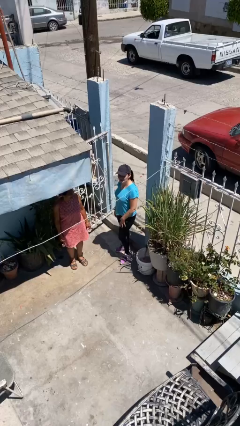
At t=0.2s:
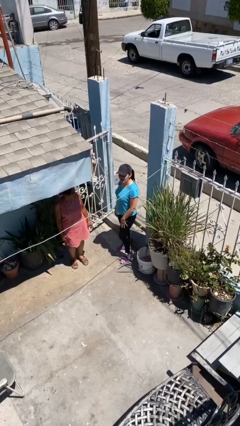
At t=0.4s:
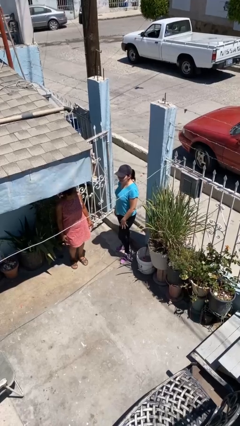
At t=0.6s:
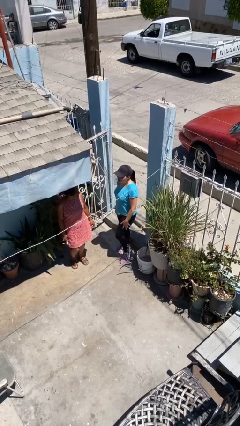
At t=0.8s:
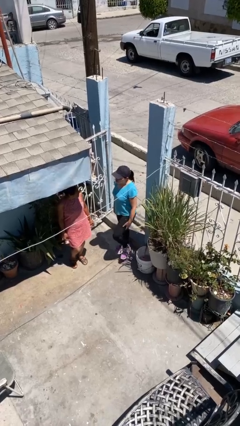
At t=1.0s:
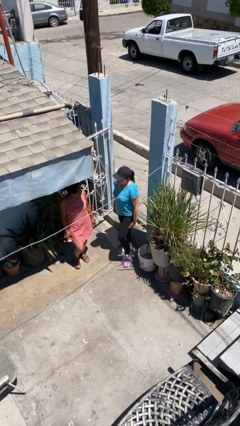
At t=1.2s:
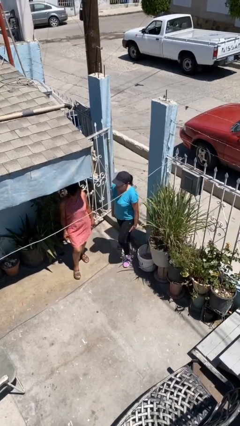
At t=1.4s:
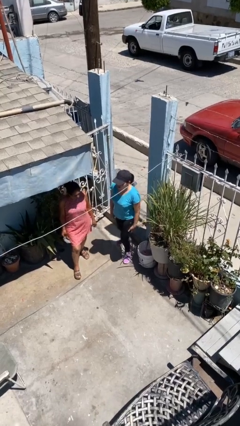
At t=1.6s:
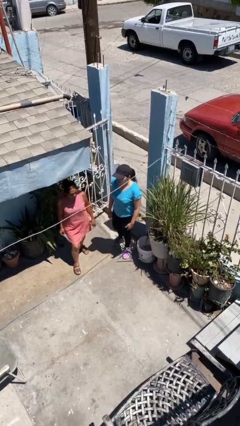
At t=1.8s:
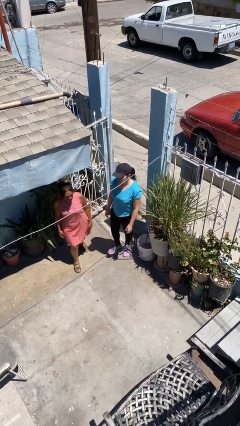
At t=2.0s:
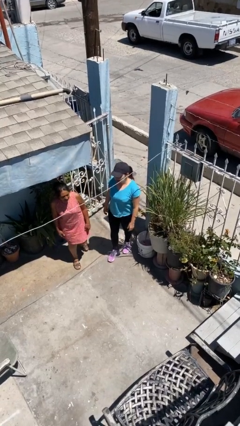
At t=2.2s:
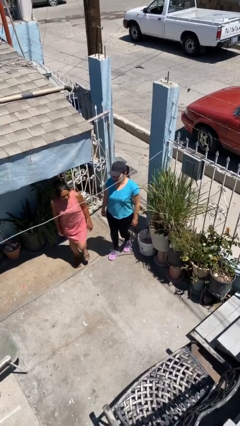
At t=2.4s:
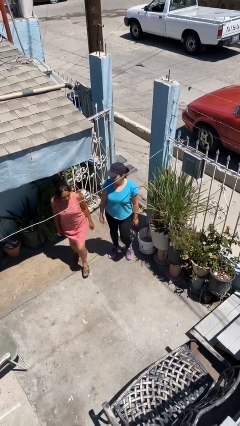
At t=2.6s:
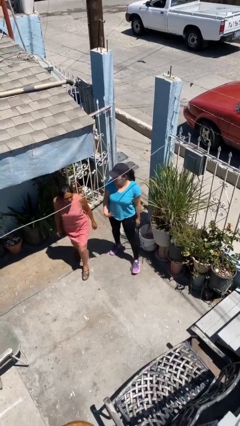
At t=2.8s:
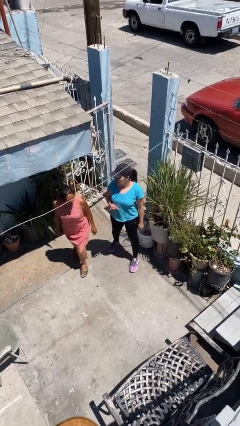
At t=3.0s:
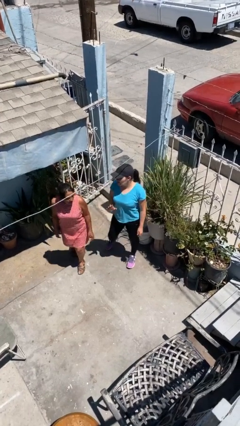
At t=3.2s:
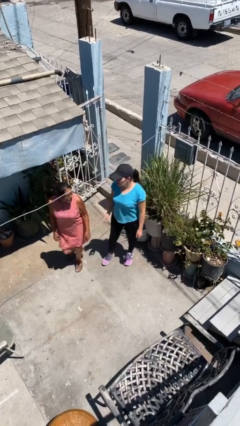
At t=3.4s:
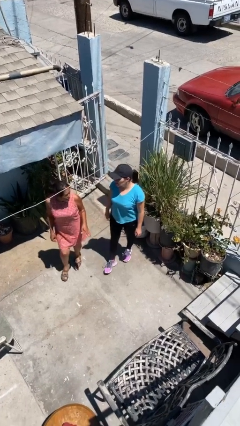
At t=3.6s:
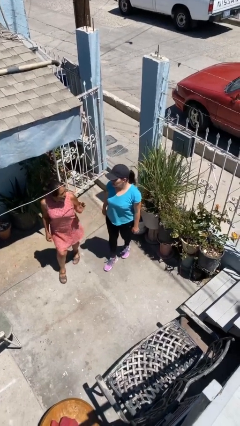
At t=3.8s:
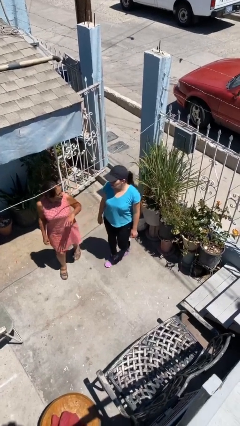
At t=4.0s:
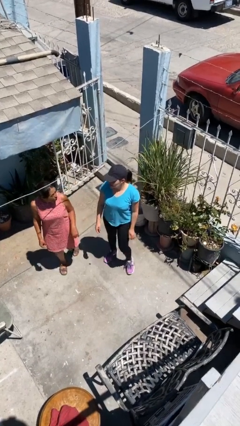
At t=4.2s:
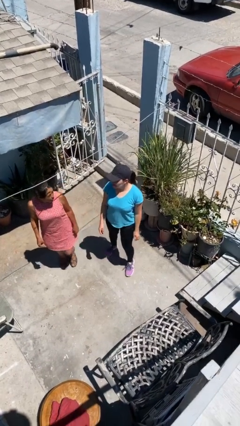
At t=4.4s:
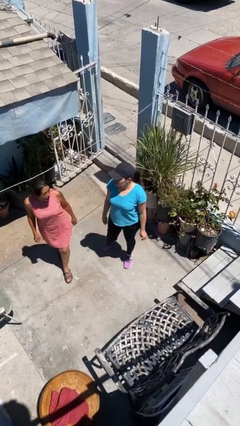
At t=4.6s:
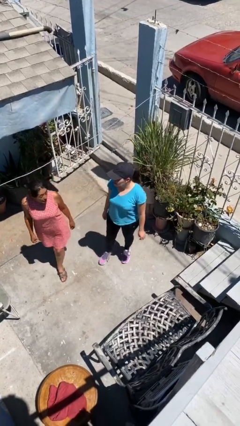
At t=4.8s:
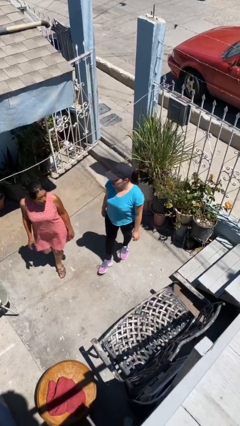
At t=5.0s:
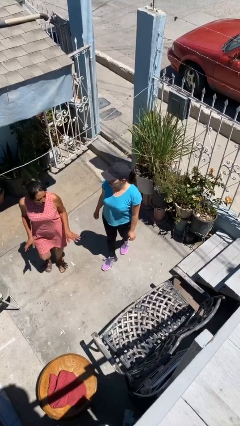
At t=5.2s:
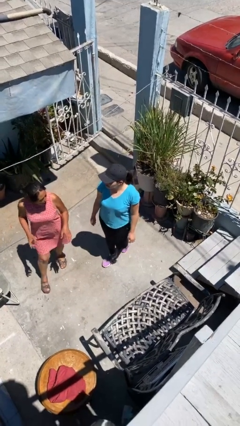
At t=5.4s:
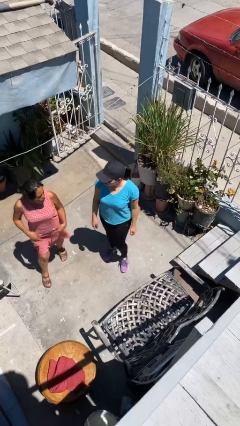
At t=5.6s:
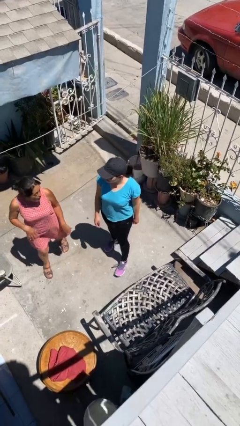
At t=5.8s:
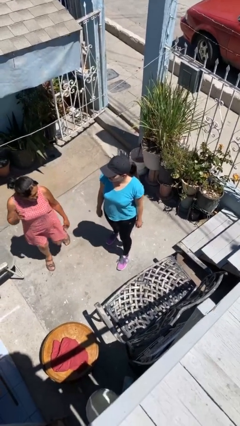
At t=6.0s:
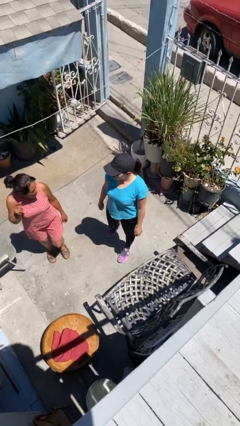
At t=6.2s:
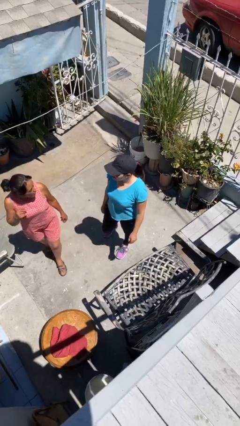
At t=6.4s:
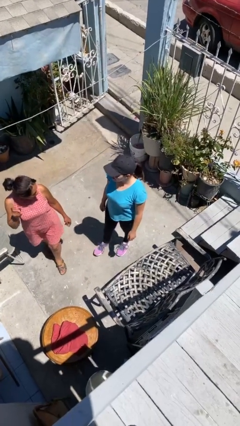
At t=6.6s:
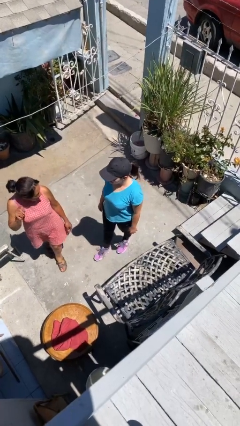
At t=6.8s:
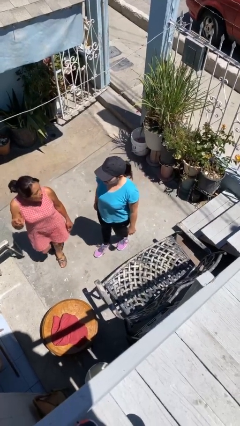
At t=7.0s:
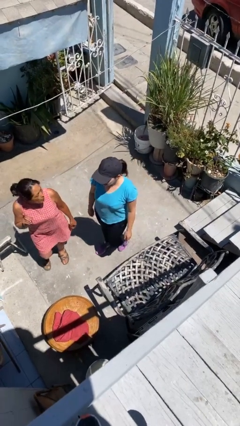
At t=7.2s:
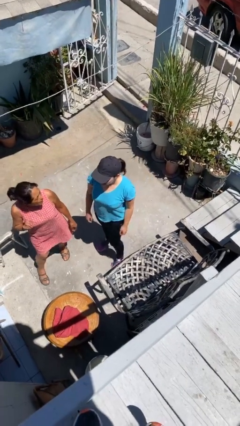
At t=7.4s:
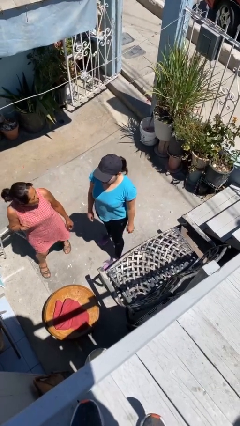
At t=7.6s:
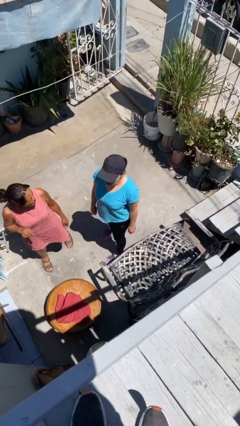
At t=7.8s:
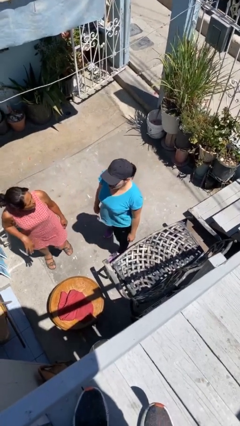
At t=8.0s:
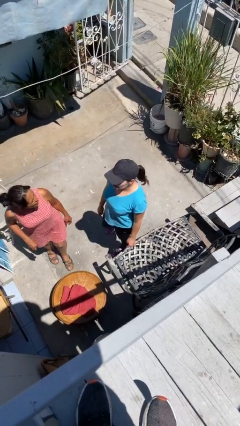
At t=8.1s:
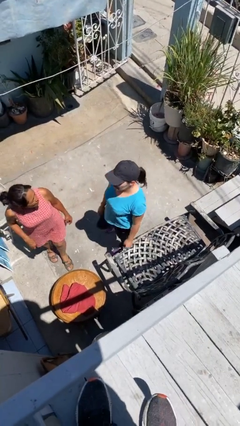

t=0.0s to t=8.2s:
person talks to person

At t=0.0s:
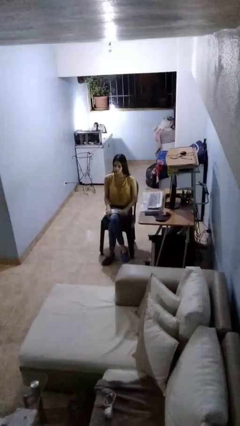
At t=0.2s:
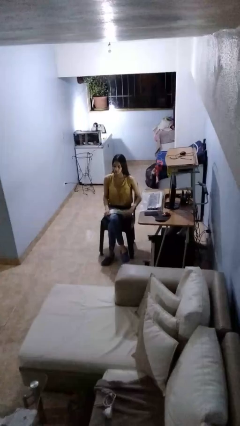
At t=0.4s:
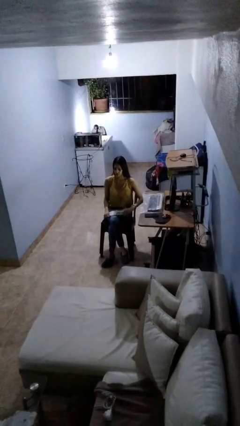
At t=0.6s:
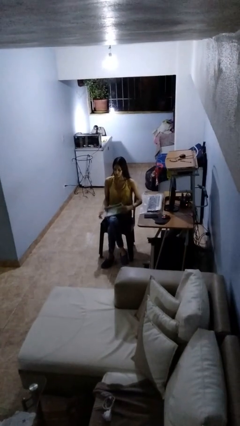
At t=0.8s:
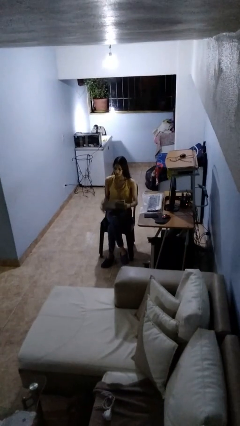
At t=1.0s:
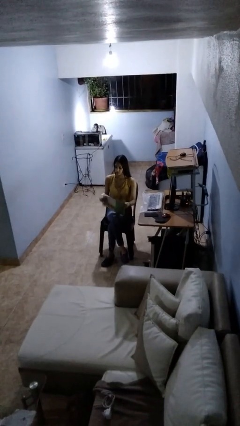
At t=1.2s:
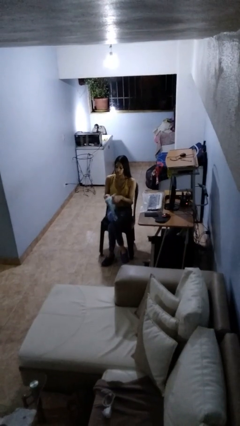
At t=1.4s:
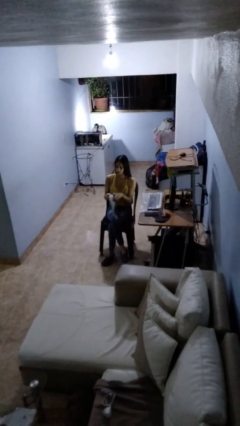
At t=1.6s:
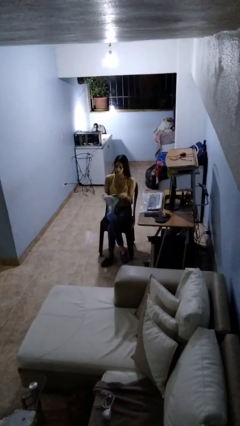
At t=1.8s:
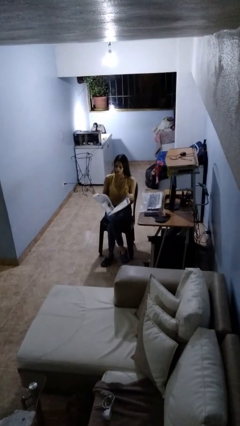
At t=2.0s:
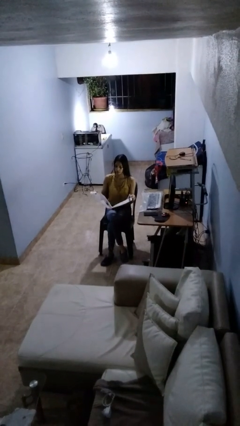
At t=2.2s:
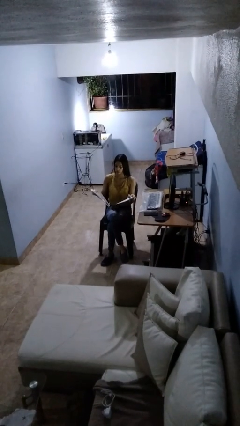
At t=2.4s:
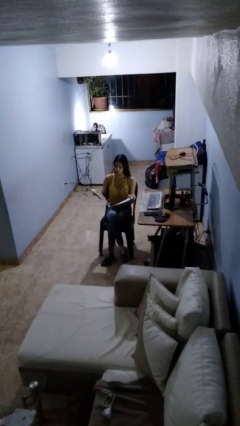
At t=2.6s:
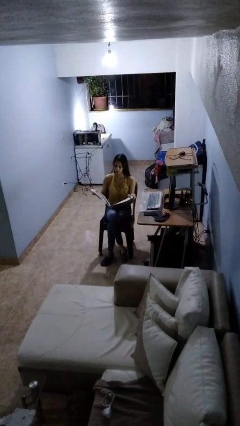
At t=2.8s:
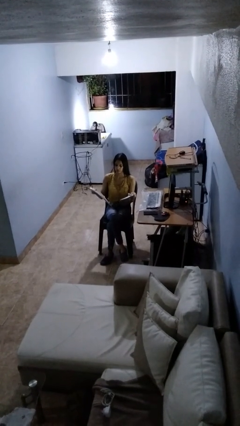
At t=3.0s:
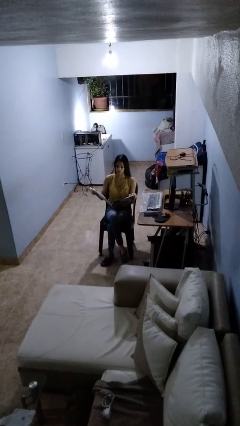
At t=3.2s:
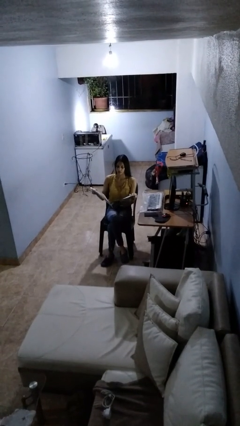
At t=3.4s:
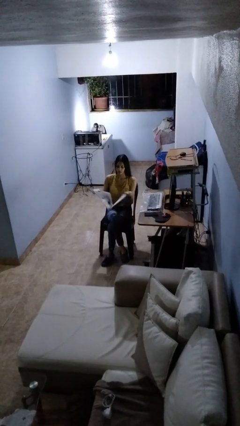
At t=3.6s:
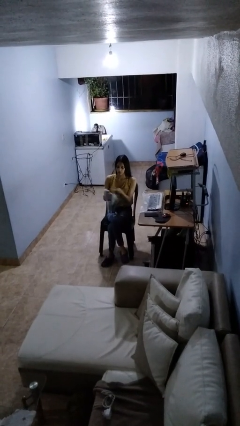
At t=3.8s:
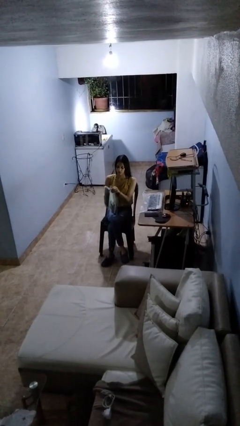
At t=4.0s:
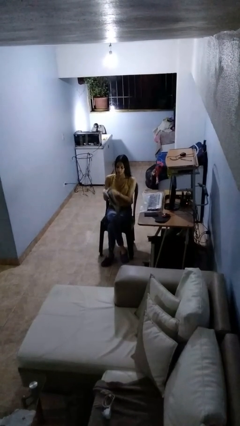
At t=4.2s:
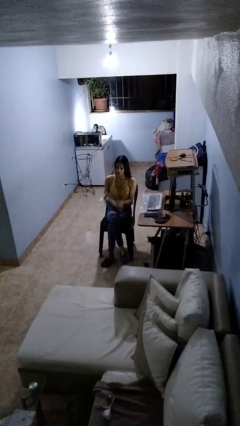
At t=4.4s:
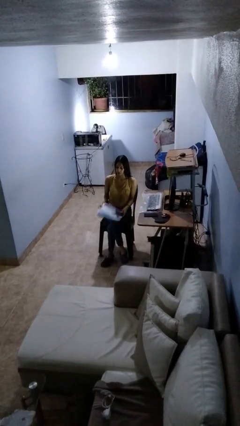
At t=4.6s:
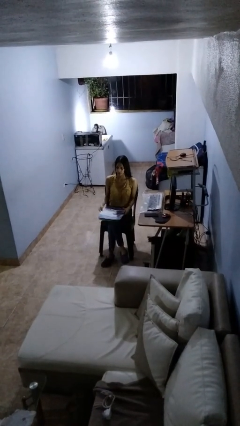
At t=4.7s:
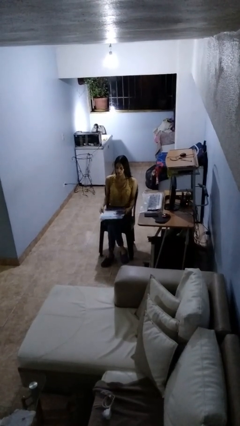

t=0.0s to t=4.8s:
person reads newspaper

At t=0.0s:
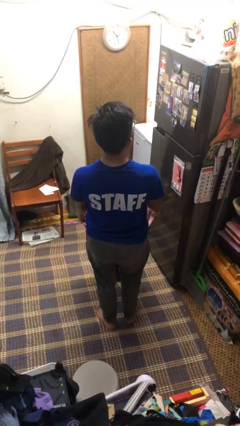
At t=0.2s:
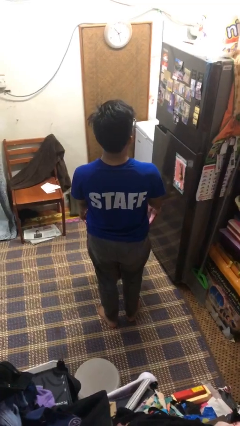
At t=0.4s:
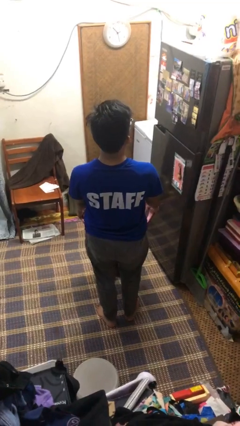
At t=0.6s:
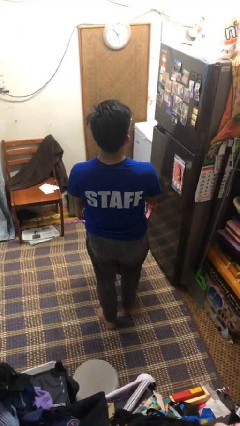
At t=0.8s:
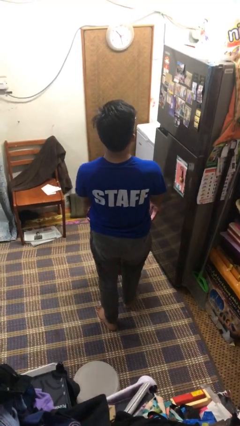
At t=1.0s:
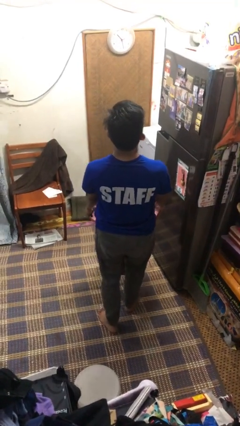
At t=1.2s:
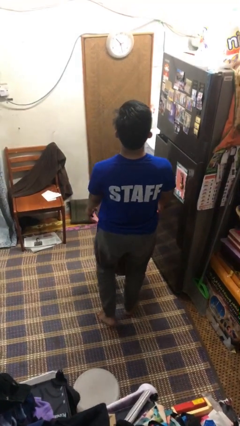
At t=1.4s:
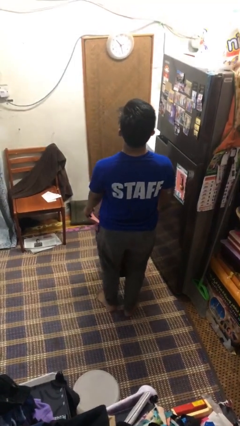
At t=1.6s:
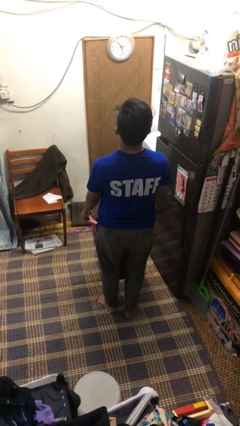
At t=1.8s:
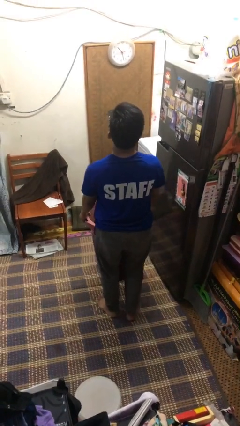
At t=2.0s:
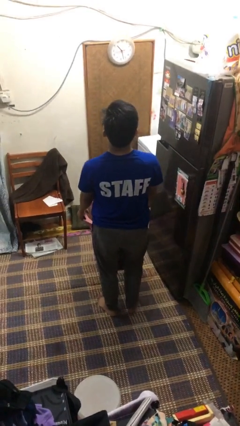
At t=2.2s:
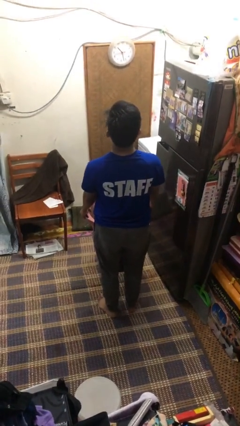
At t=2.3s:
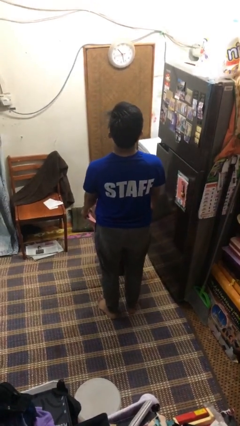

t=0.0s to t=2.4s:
person carries laundry basket

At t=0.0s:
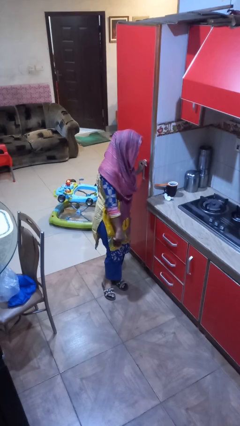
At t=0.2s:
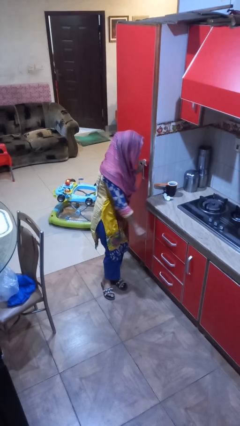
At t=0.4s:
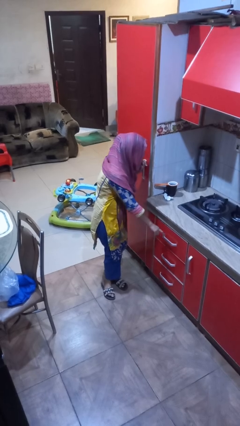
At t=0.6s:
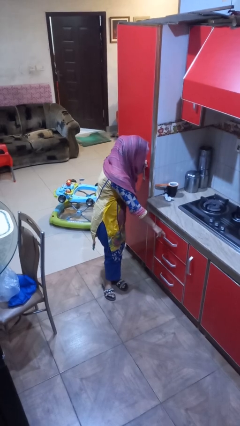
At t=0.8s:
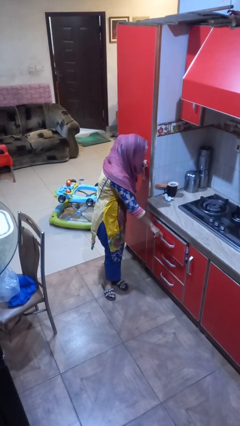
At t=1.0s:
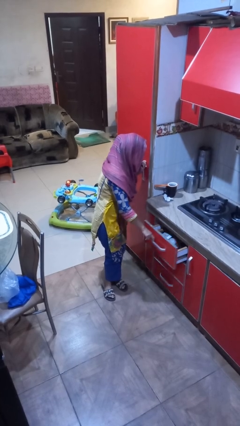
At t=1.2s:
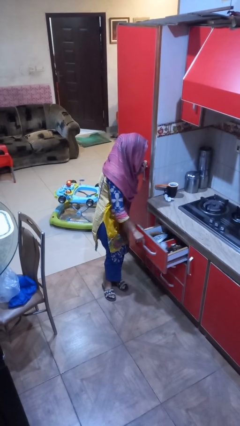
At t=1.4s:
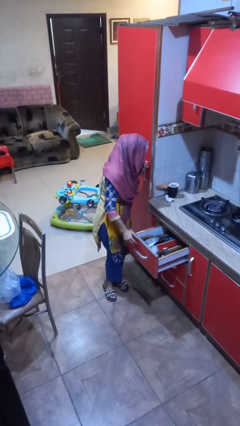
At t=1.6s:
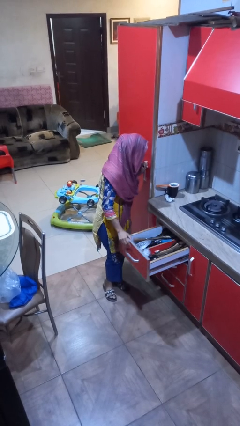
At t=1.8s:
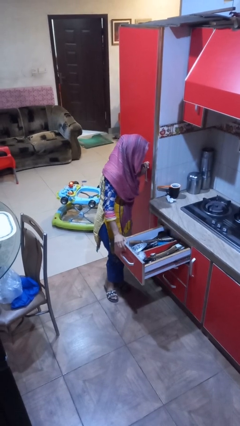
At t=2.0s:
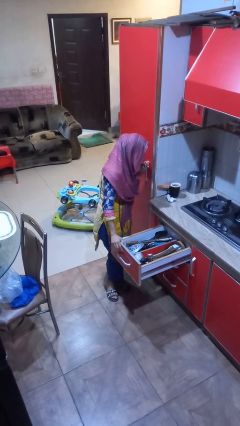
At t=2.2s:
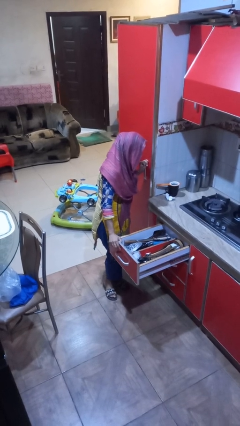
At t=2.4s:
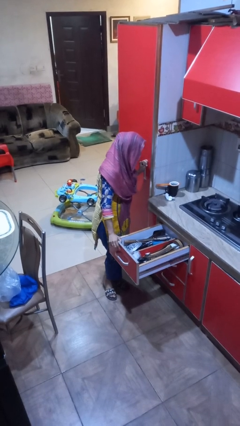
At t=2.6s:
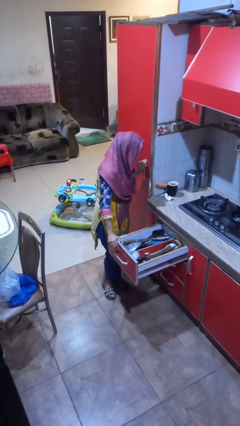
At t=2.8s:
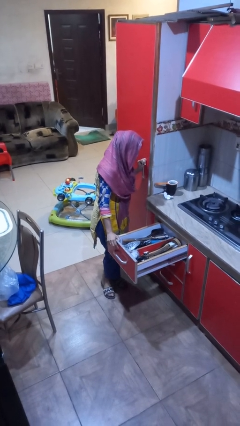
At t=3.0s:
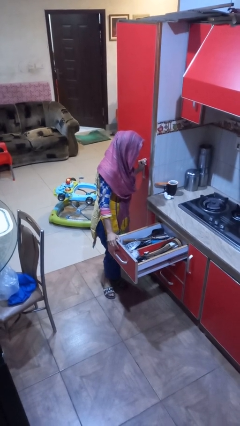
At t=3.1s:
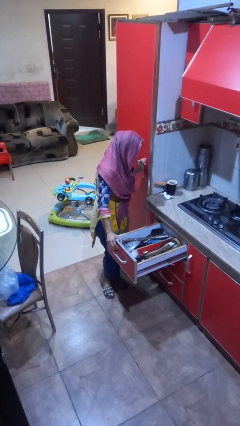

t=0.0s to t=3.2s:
person opens kitchen drawer
